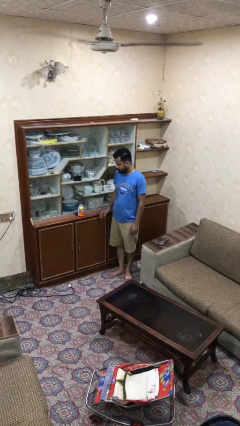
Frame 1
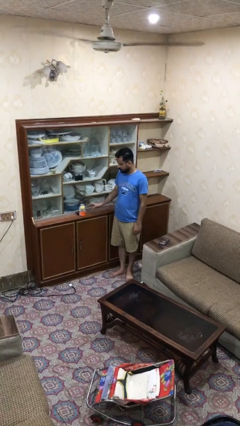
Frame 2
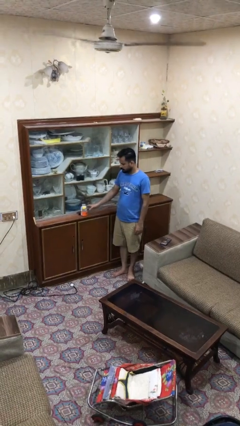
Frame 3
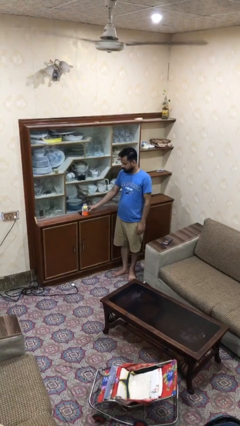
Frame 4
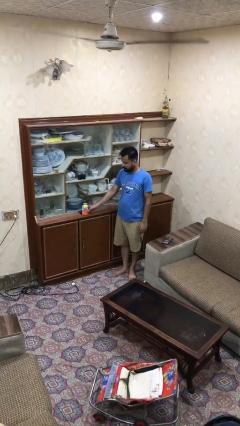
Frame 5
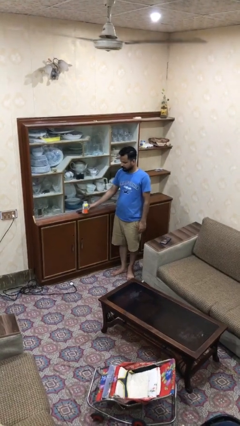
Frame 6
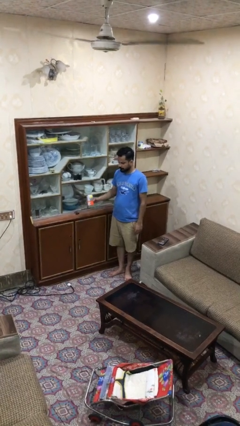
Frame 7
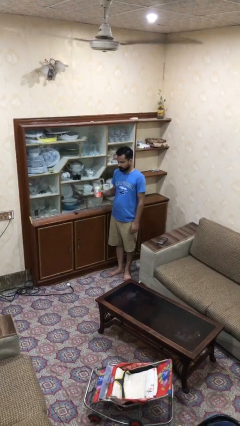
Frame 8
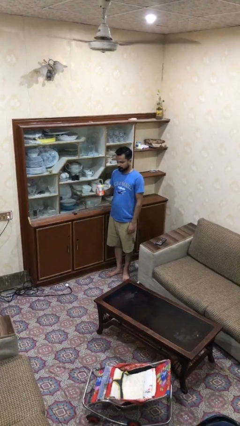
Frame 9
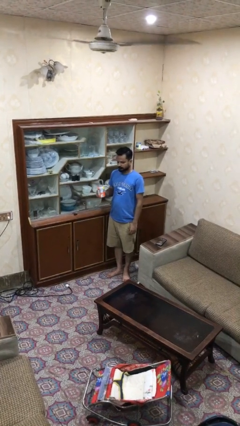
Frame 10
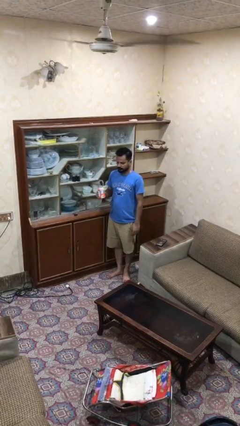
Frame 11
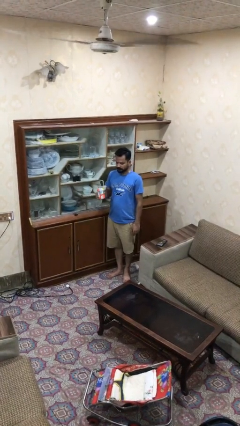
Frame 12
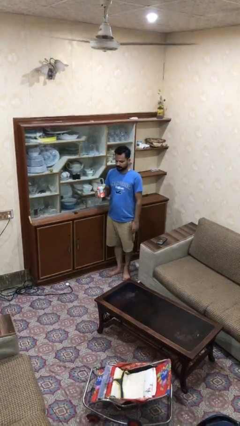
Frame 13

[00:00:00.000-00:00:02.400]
person picks up object from shelf

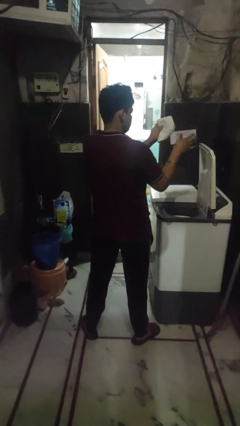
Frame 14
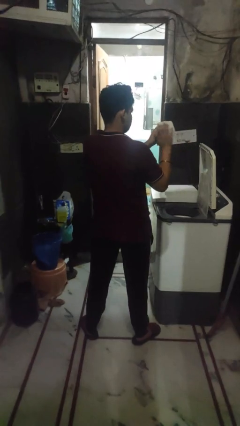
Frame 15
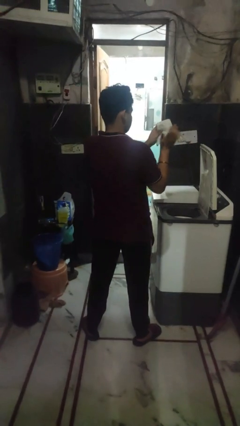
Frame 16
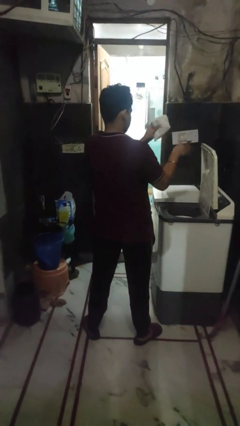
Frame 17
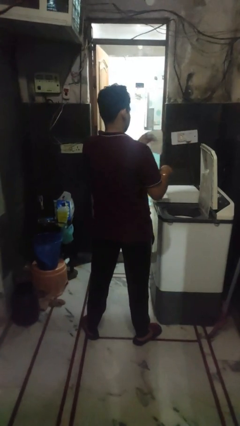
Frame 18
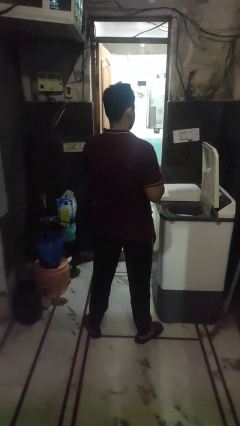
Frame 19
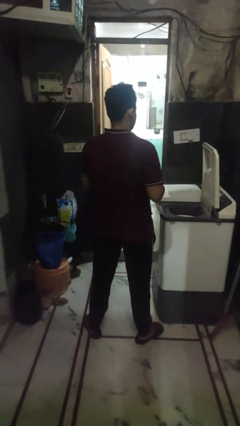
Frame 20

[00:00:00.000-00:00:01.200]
person cleans dryer lint trap

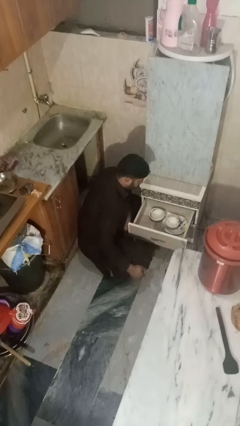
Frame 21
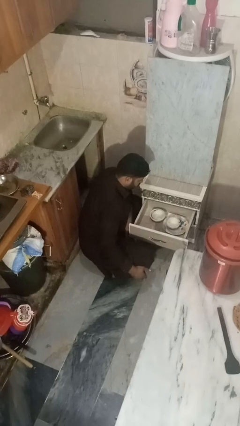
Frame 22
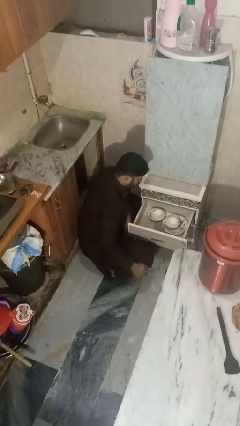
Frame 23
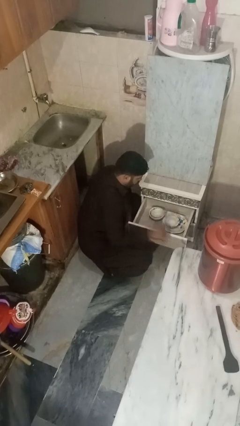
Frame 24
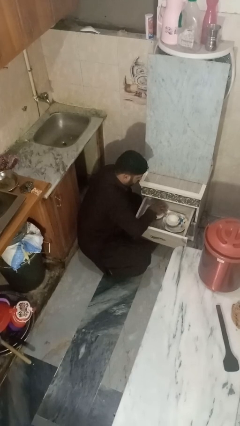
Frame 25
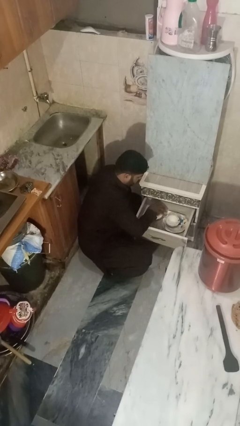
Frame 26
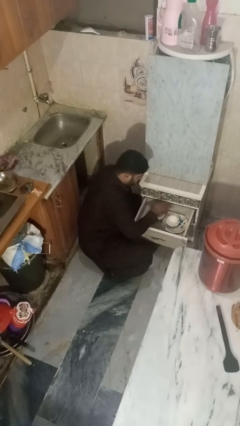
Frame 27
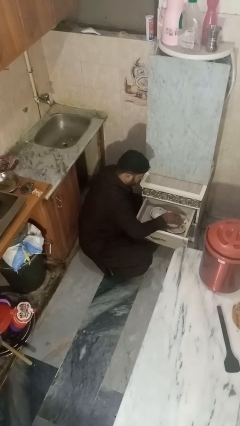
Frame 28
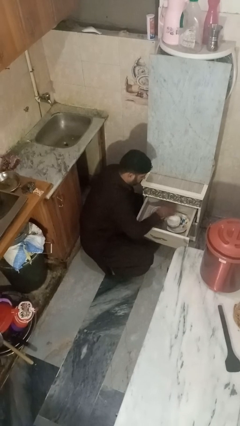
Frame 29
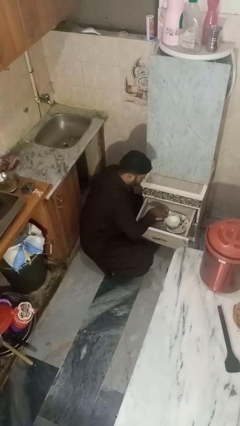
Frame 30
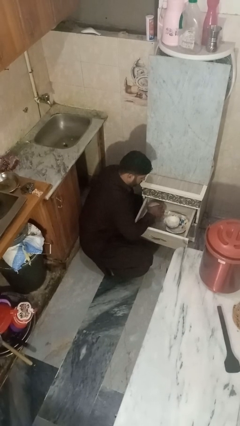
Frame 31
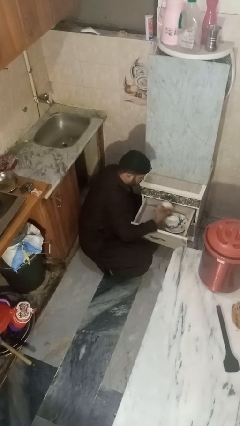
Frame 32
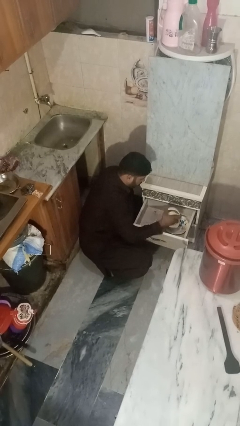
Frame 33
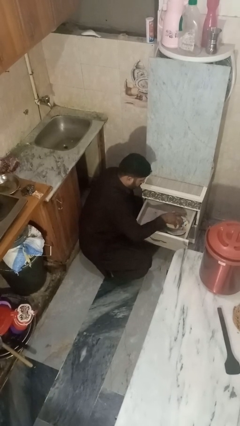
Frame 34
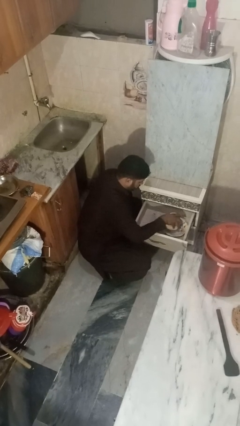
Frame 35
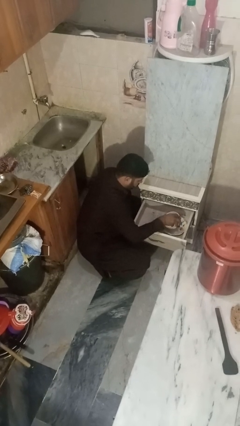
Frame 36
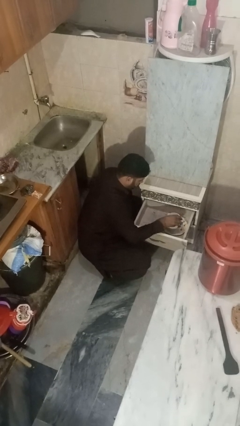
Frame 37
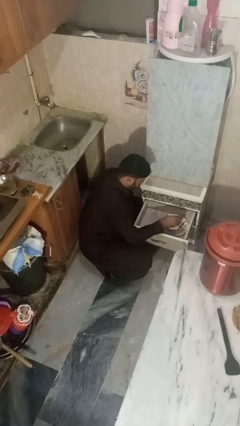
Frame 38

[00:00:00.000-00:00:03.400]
person searches in kitchen drawer

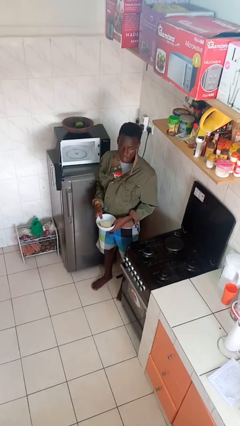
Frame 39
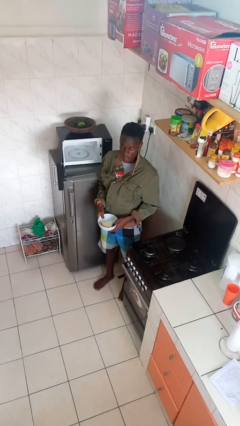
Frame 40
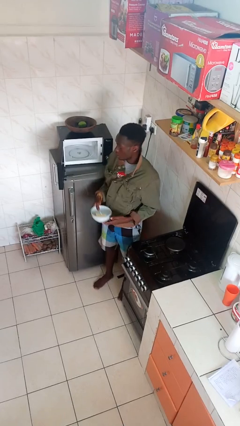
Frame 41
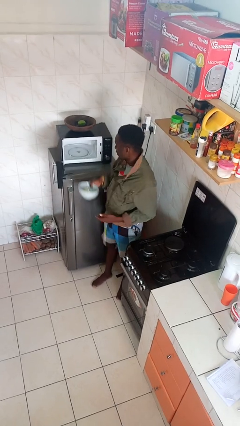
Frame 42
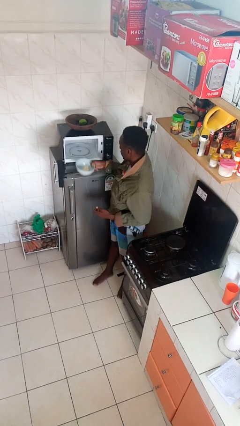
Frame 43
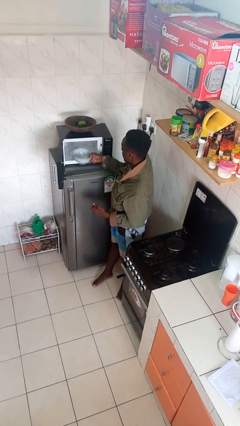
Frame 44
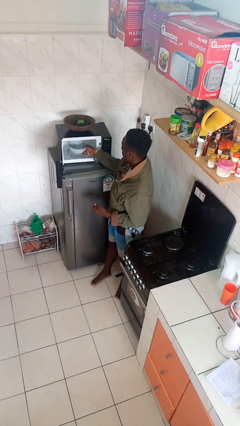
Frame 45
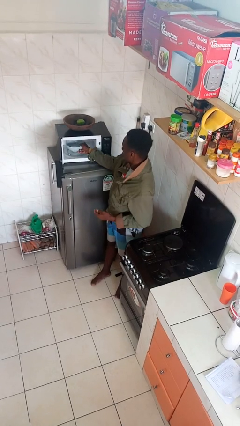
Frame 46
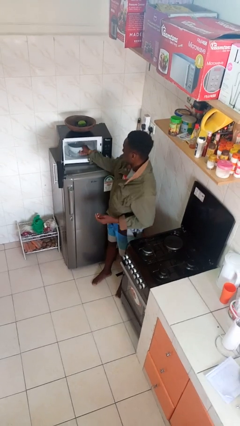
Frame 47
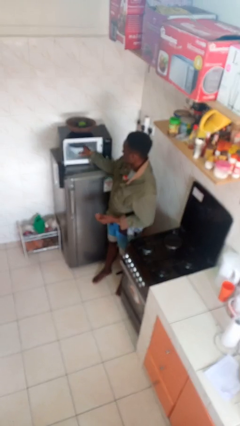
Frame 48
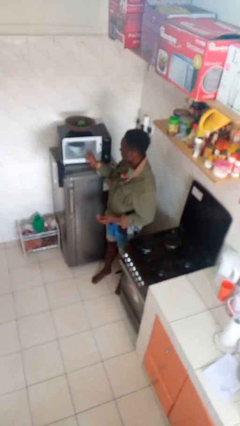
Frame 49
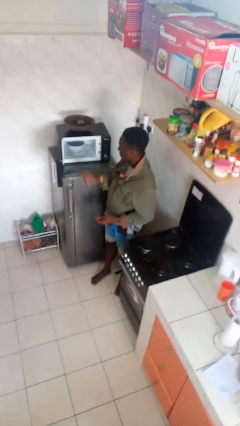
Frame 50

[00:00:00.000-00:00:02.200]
person puts object into microwave

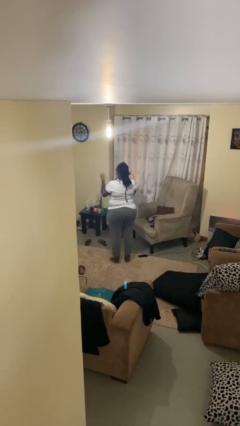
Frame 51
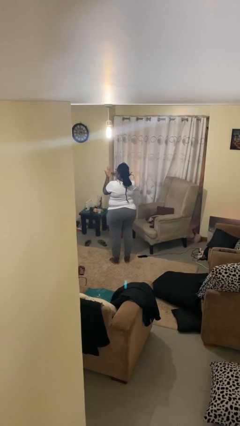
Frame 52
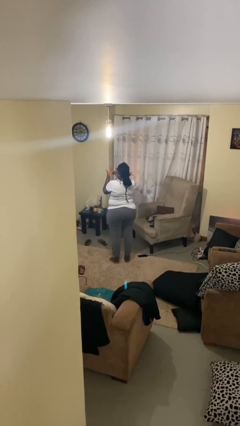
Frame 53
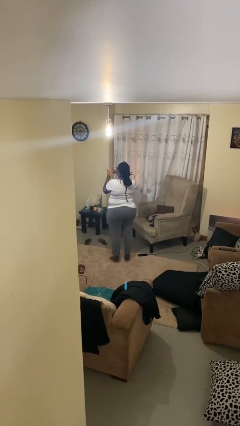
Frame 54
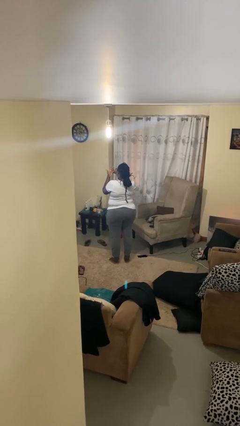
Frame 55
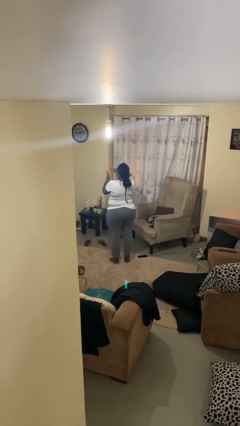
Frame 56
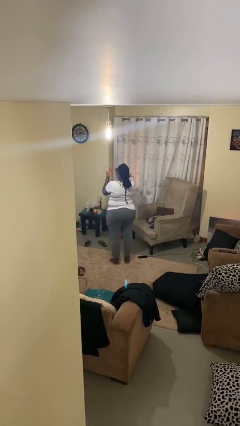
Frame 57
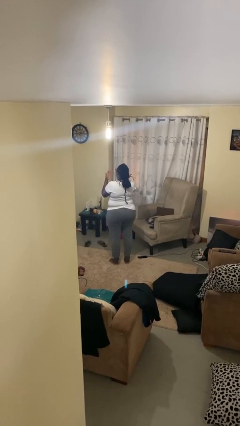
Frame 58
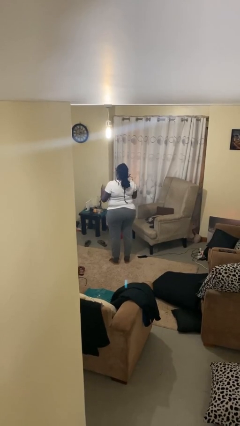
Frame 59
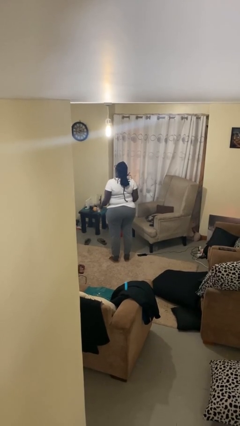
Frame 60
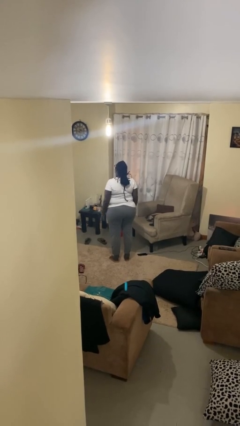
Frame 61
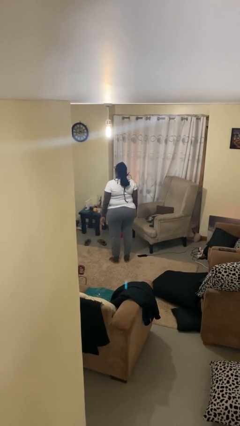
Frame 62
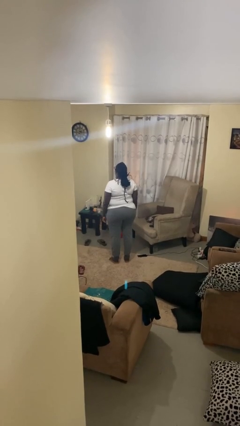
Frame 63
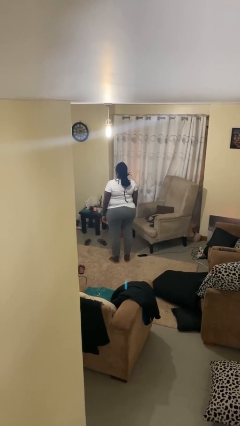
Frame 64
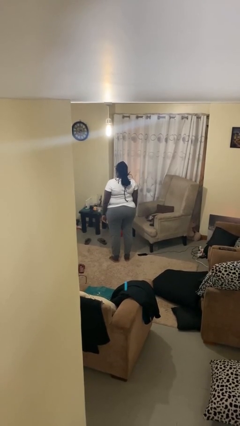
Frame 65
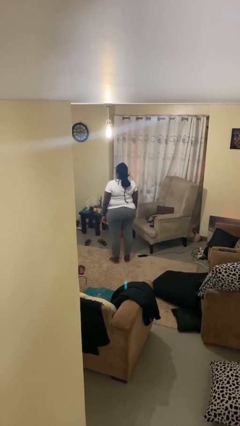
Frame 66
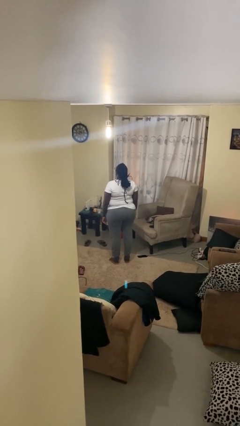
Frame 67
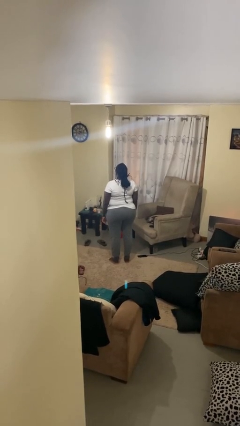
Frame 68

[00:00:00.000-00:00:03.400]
person takes off ring

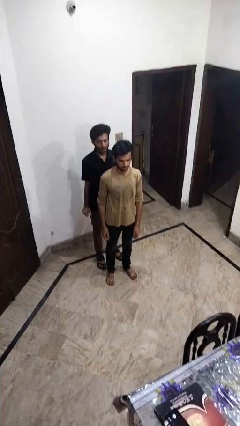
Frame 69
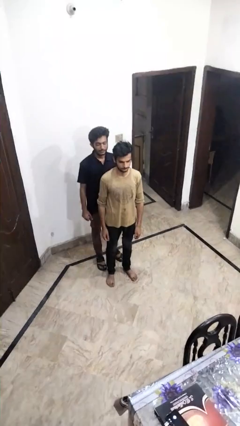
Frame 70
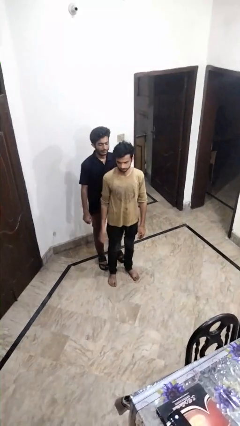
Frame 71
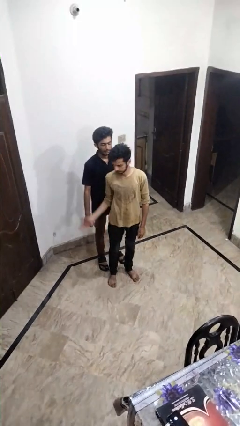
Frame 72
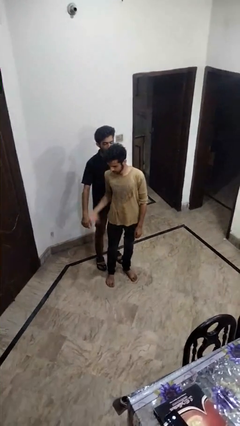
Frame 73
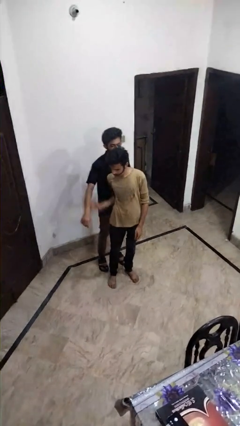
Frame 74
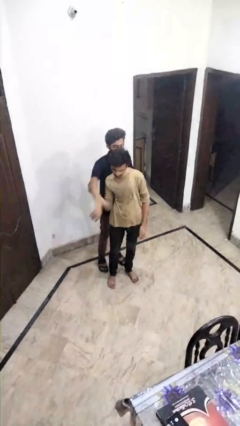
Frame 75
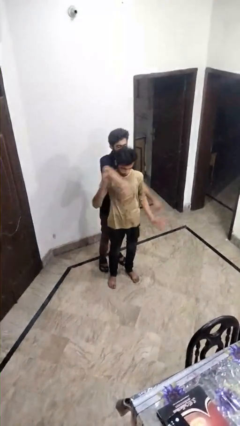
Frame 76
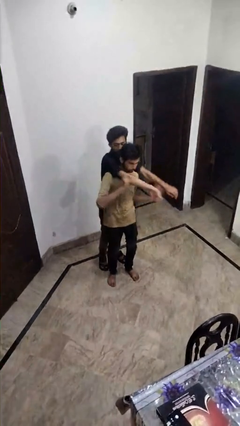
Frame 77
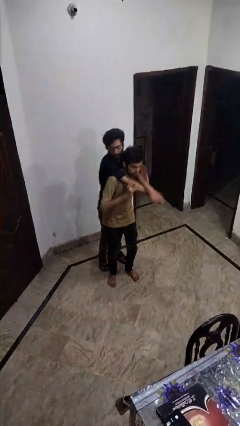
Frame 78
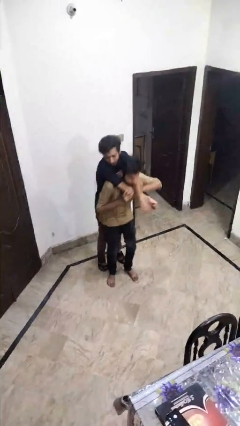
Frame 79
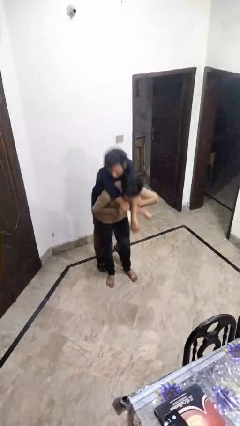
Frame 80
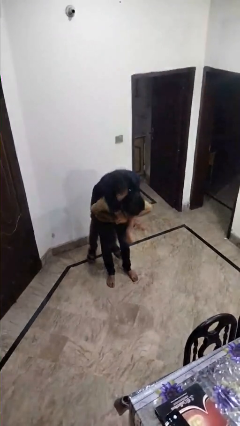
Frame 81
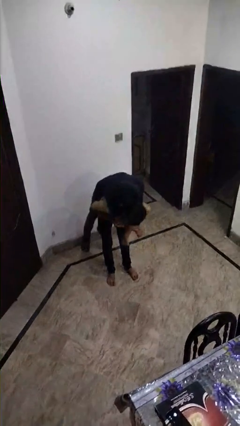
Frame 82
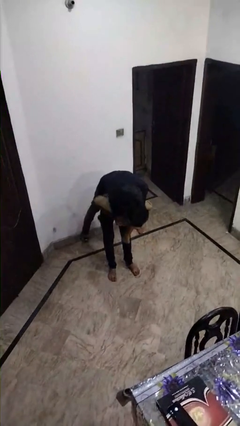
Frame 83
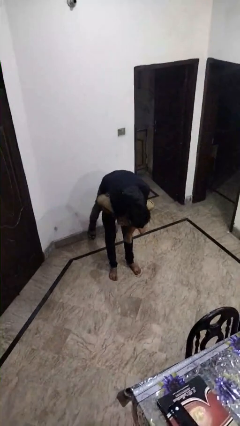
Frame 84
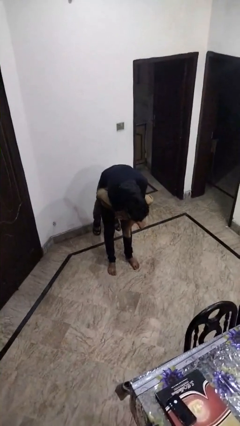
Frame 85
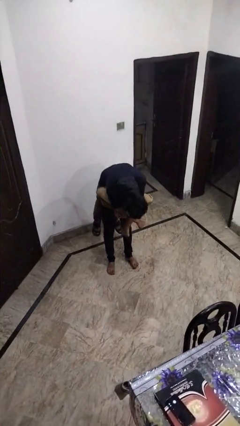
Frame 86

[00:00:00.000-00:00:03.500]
person carries person over shoulder

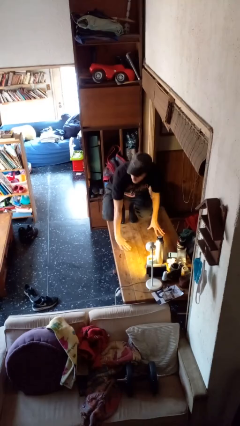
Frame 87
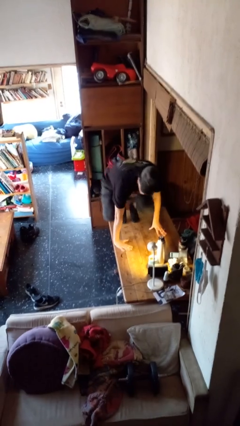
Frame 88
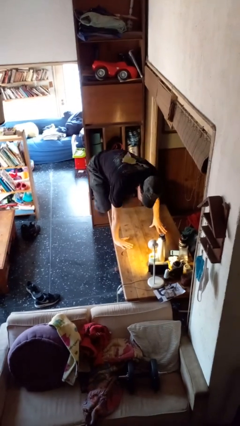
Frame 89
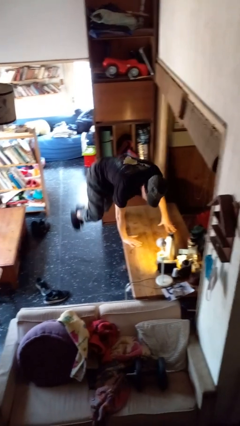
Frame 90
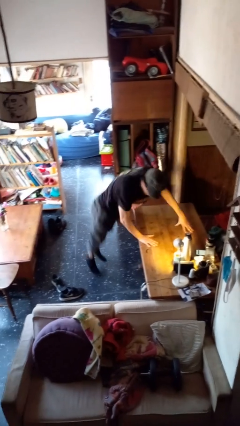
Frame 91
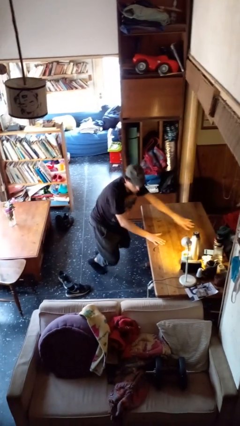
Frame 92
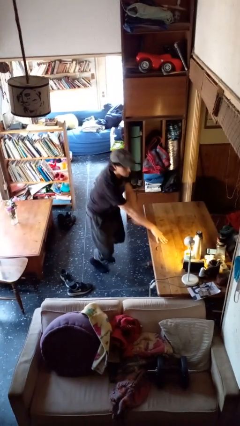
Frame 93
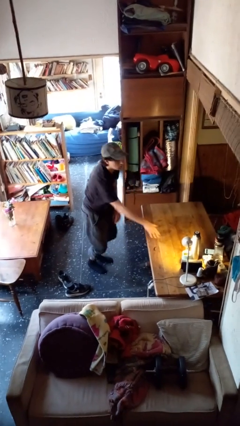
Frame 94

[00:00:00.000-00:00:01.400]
person climbs off table
